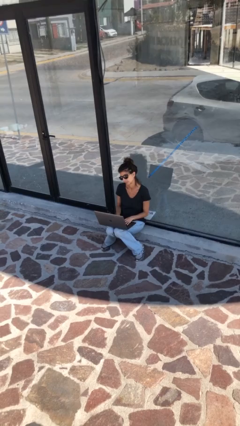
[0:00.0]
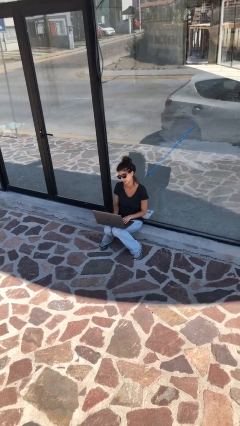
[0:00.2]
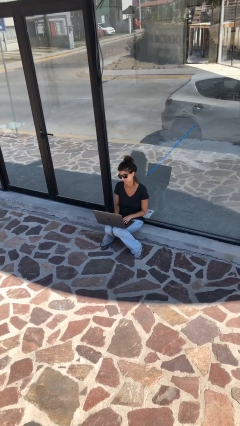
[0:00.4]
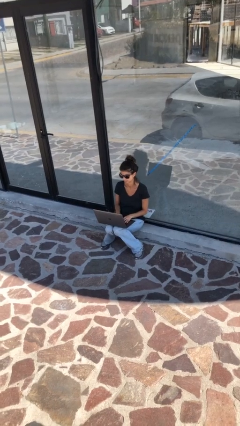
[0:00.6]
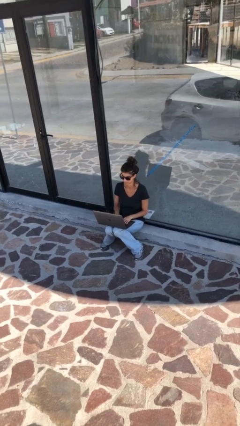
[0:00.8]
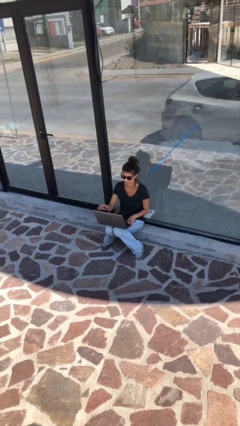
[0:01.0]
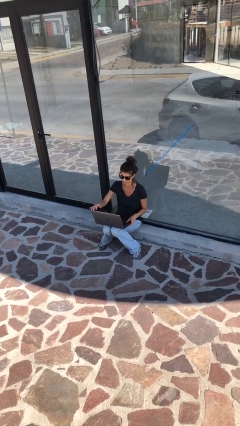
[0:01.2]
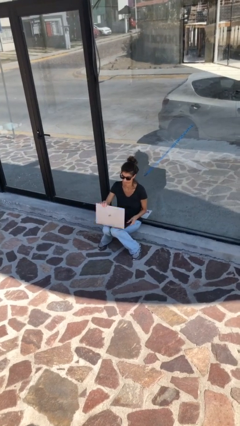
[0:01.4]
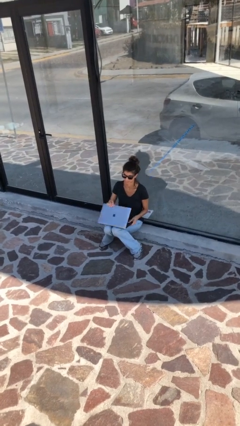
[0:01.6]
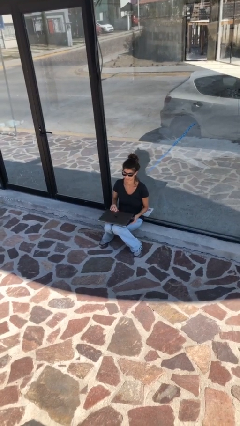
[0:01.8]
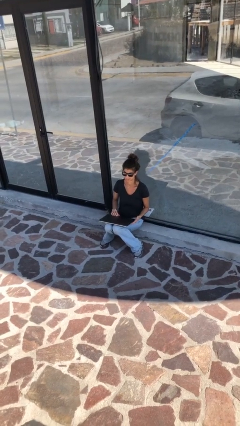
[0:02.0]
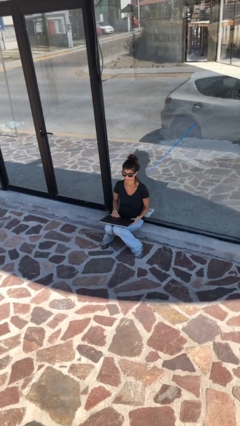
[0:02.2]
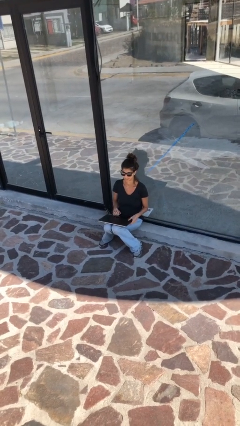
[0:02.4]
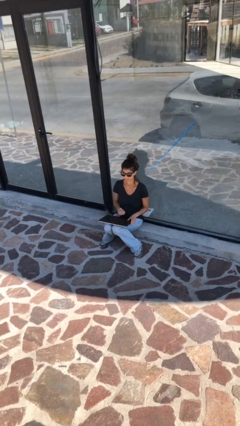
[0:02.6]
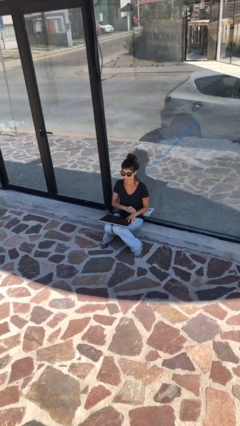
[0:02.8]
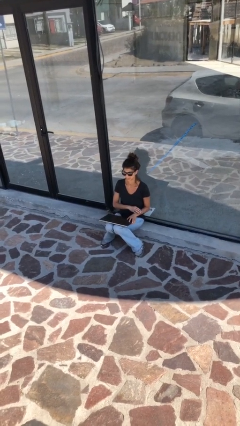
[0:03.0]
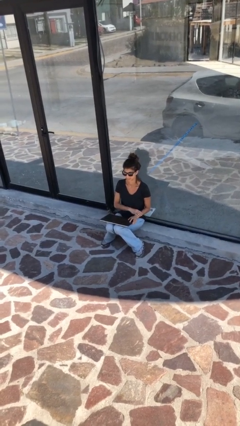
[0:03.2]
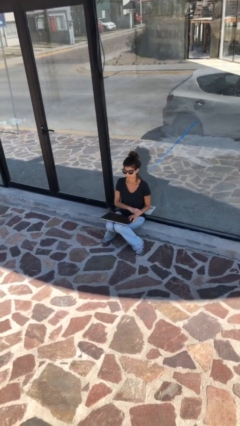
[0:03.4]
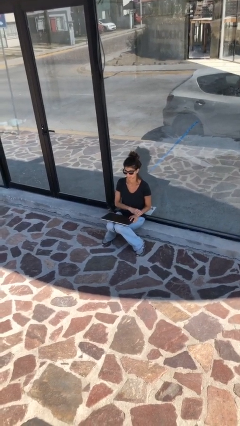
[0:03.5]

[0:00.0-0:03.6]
person interacts with laptop

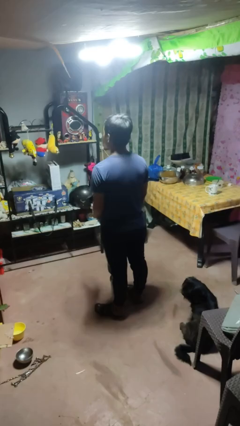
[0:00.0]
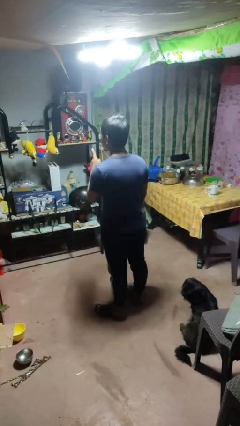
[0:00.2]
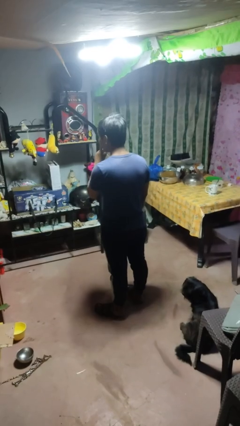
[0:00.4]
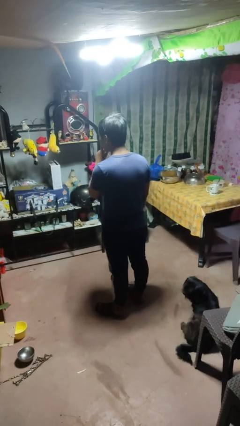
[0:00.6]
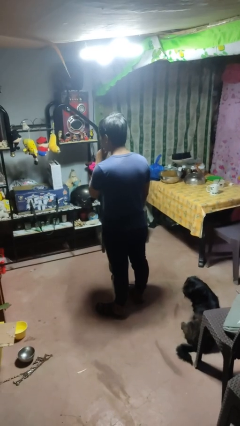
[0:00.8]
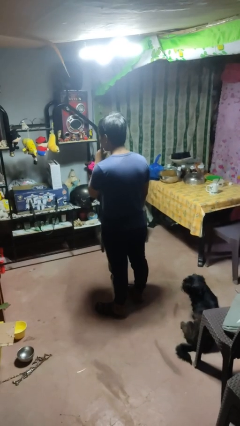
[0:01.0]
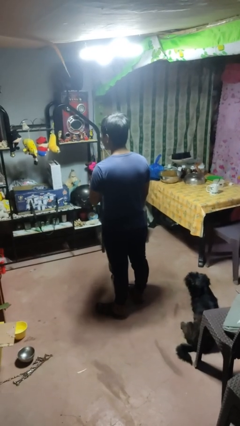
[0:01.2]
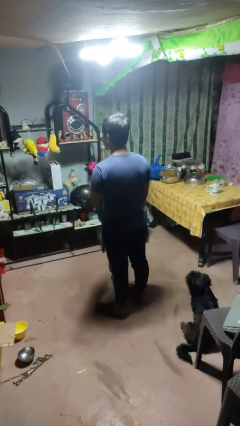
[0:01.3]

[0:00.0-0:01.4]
person gestures be quiet

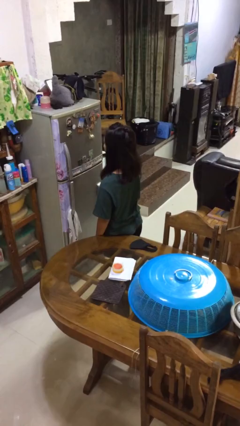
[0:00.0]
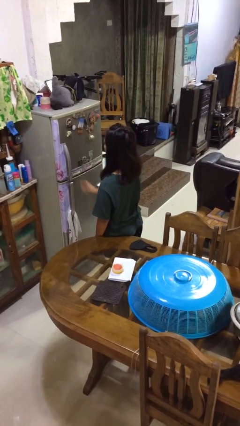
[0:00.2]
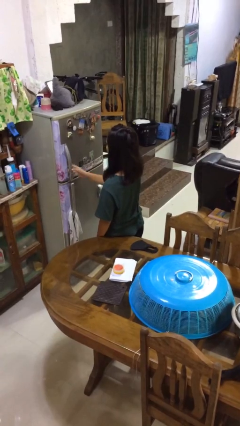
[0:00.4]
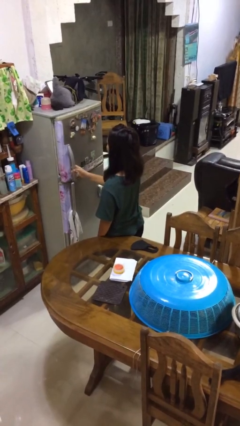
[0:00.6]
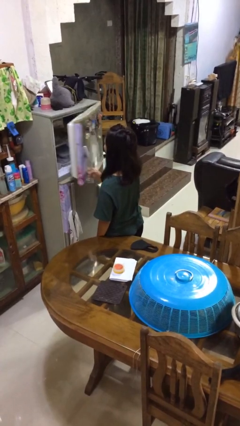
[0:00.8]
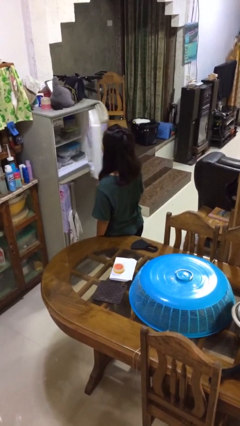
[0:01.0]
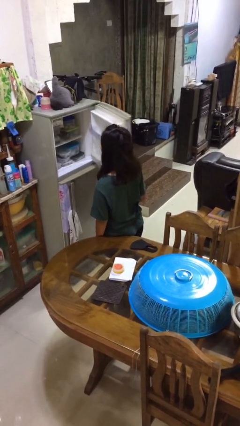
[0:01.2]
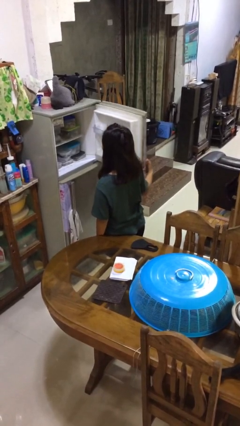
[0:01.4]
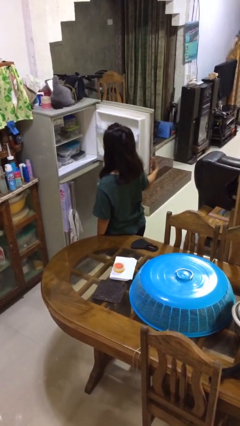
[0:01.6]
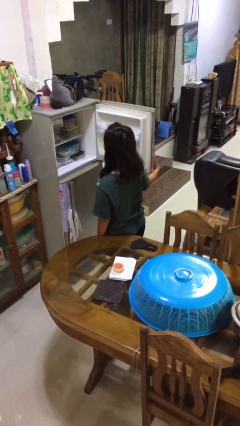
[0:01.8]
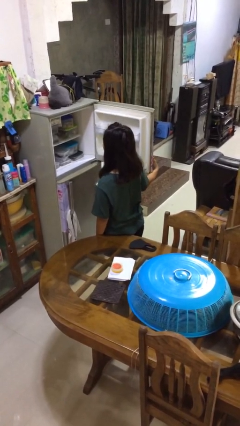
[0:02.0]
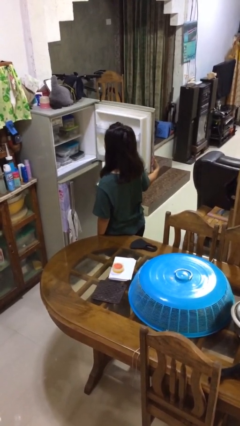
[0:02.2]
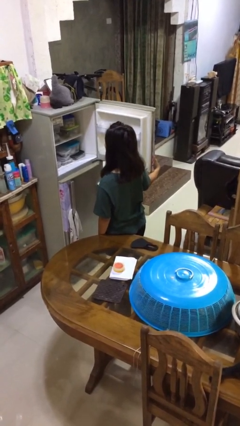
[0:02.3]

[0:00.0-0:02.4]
person opens refrigerator

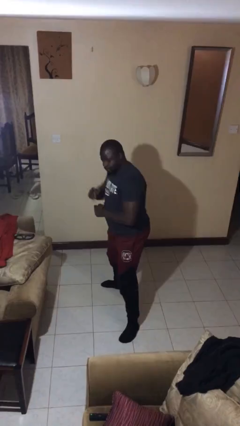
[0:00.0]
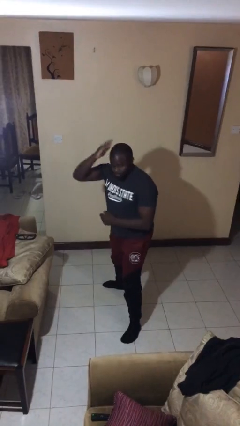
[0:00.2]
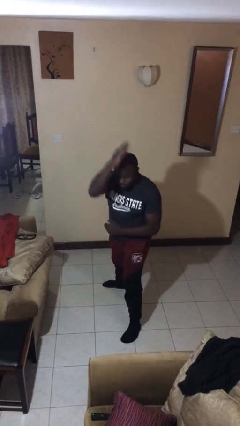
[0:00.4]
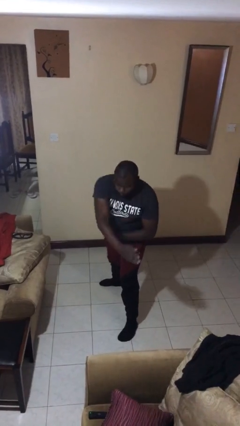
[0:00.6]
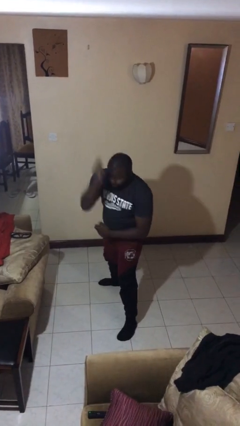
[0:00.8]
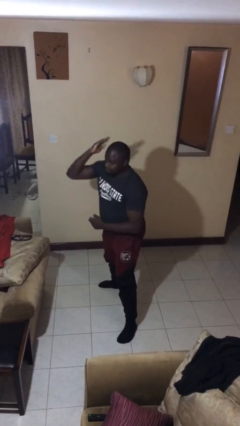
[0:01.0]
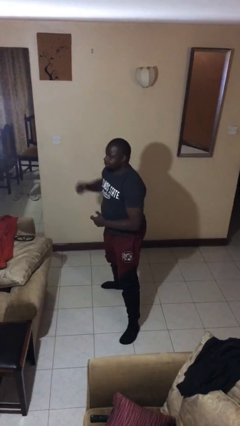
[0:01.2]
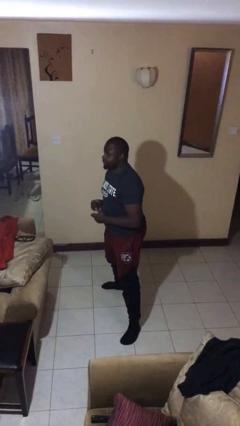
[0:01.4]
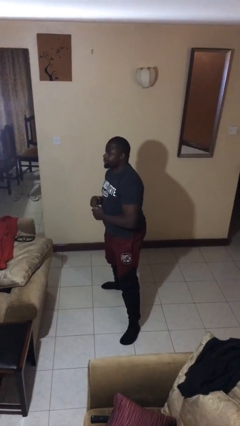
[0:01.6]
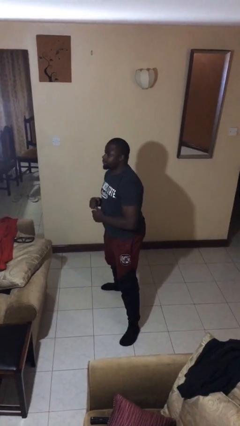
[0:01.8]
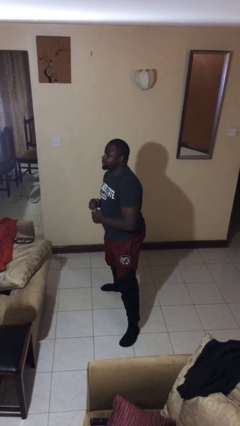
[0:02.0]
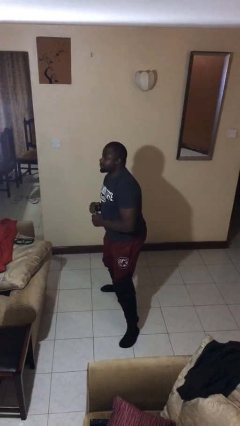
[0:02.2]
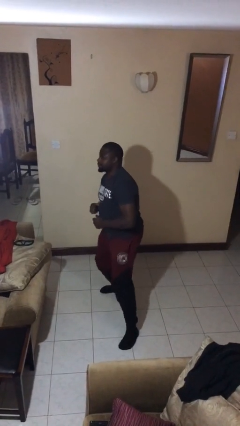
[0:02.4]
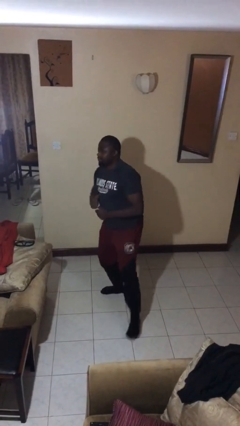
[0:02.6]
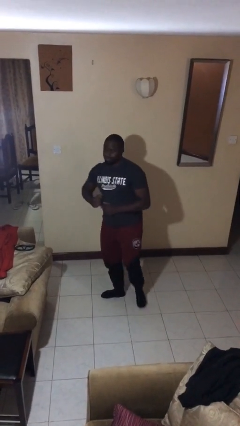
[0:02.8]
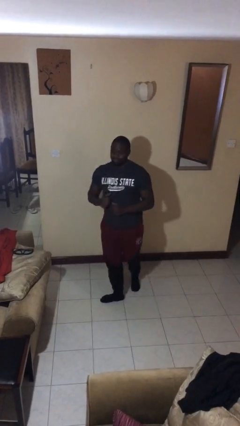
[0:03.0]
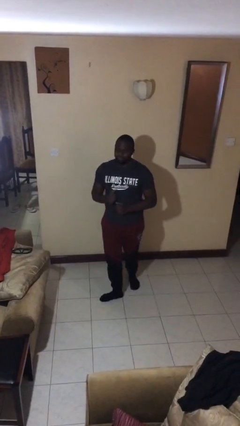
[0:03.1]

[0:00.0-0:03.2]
person karate chop

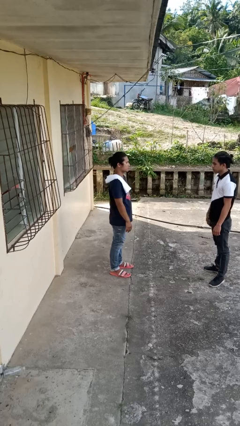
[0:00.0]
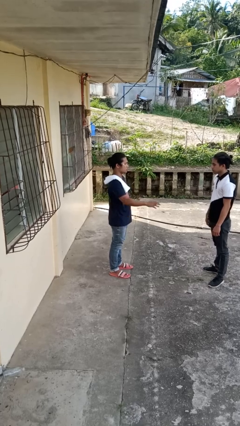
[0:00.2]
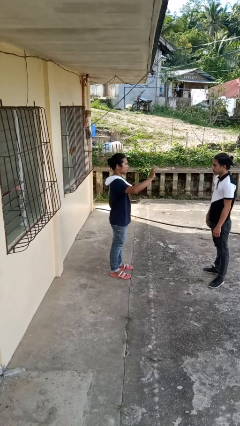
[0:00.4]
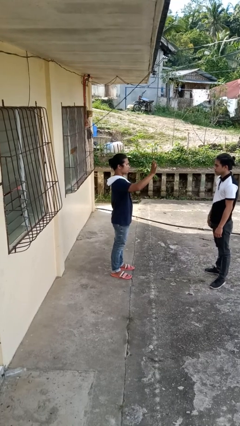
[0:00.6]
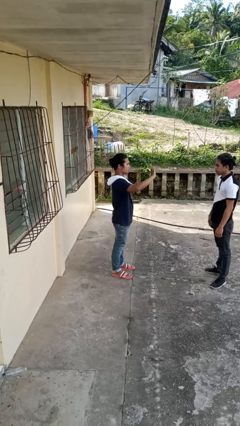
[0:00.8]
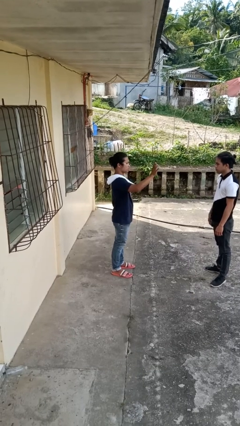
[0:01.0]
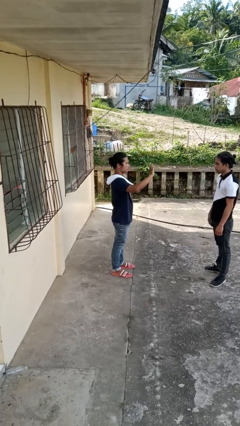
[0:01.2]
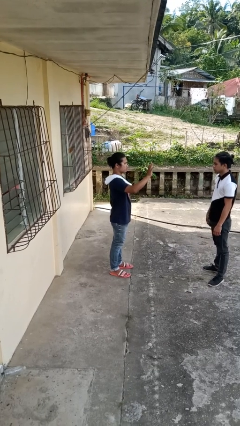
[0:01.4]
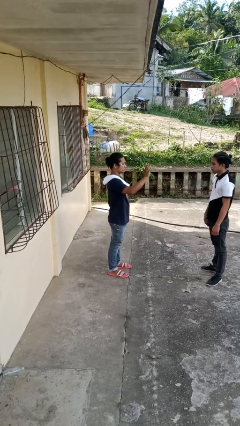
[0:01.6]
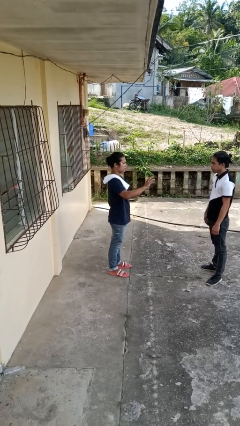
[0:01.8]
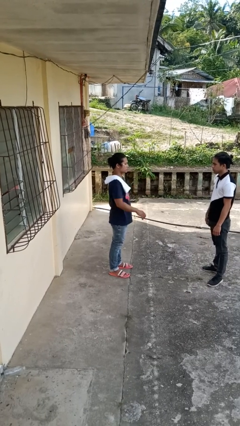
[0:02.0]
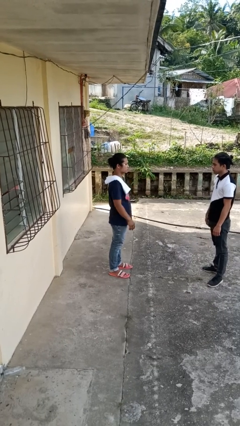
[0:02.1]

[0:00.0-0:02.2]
person waves at person

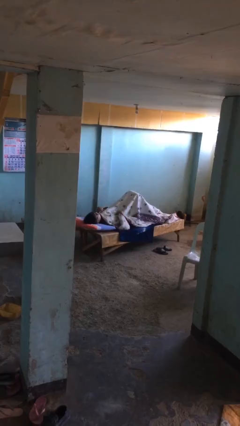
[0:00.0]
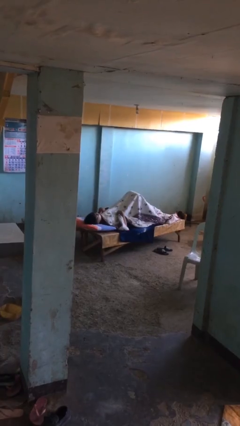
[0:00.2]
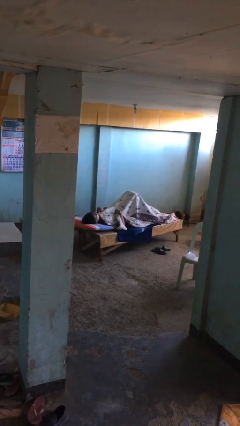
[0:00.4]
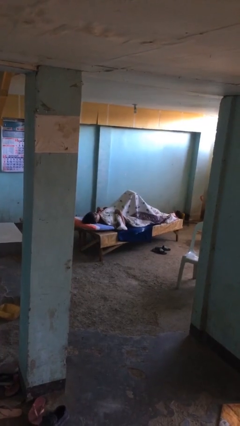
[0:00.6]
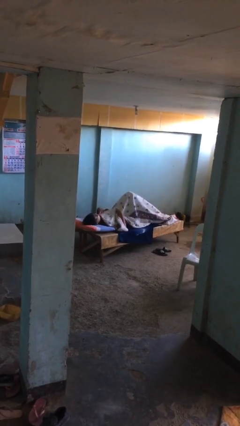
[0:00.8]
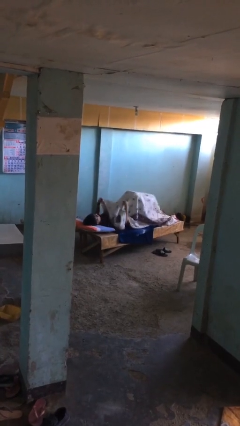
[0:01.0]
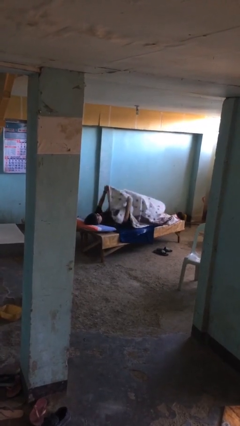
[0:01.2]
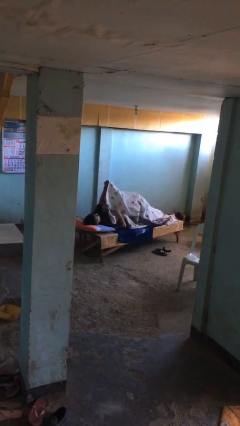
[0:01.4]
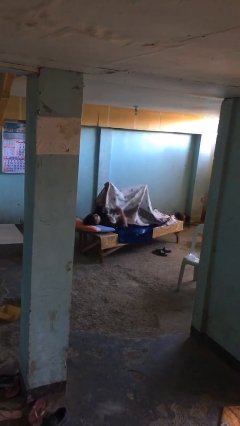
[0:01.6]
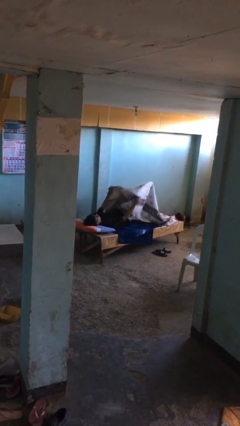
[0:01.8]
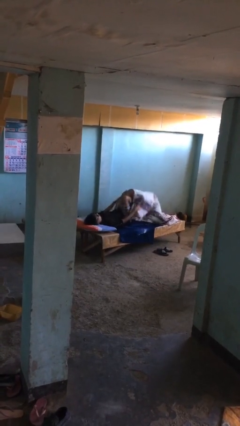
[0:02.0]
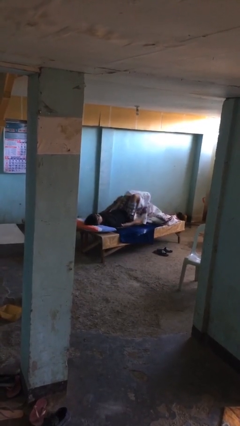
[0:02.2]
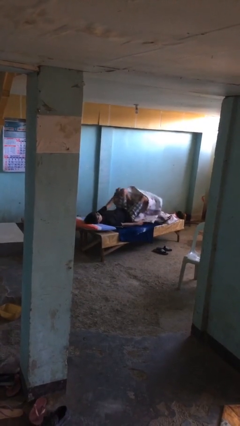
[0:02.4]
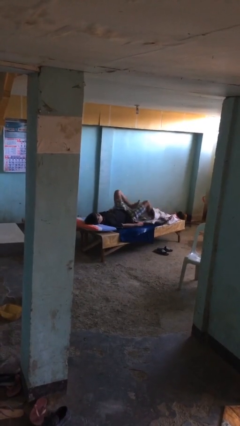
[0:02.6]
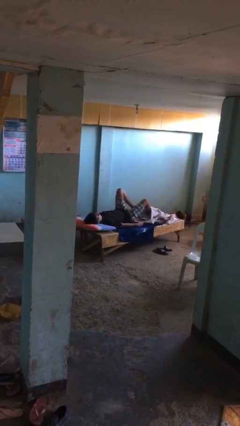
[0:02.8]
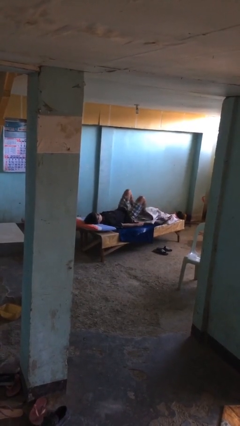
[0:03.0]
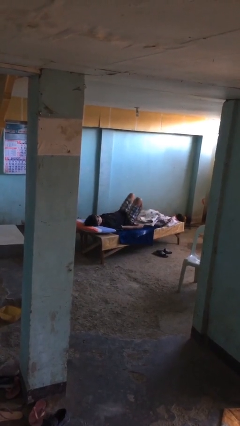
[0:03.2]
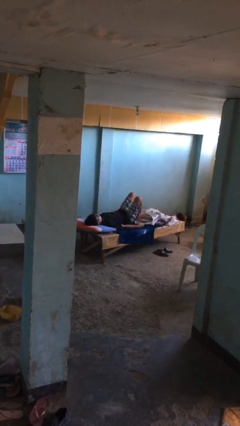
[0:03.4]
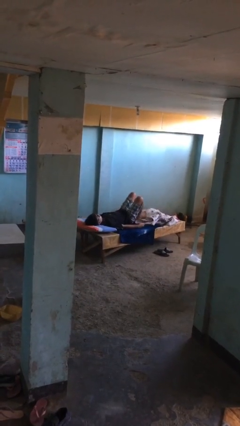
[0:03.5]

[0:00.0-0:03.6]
person uncovers with bedsheets

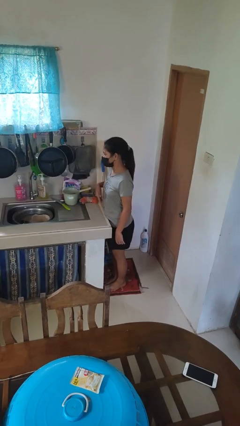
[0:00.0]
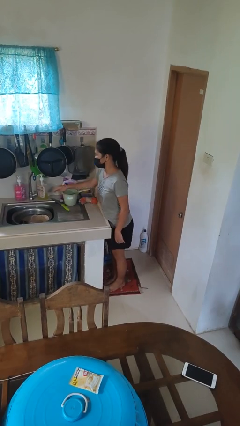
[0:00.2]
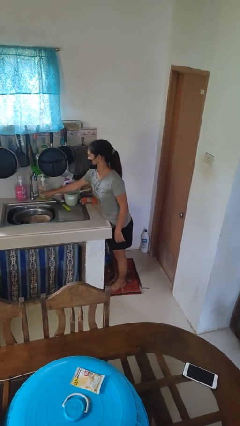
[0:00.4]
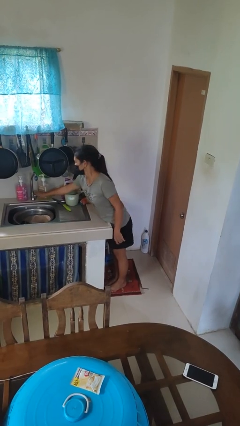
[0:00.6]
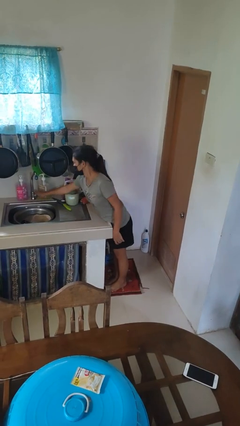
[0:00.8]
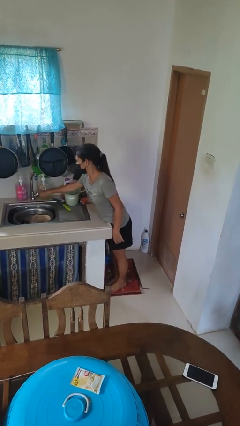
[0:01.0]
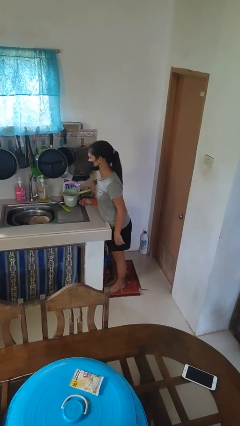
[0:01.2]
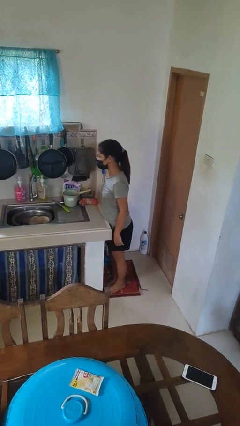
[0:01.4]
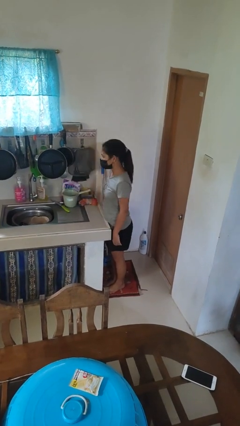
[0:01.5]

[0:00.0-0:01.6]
person turns off faucet
